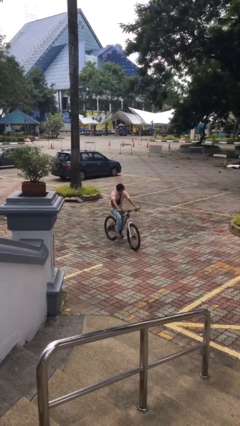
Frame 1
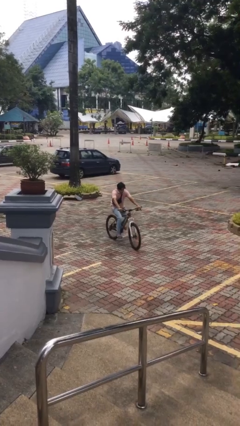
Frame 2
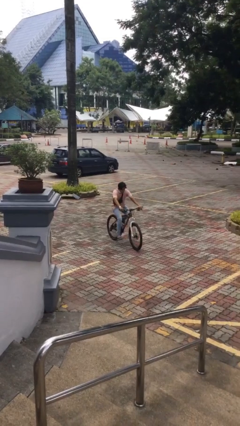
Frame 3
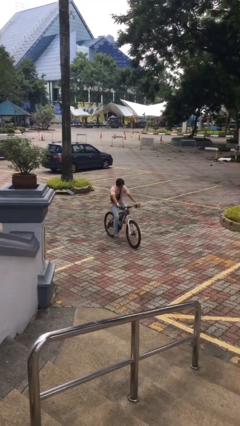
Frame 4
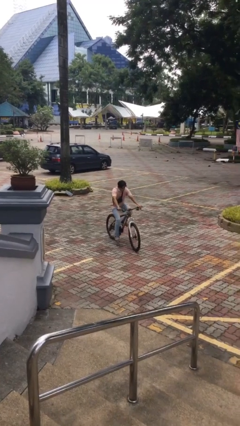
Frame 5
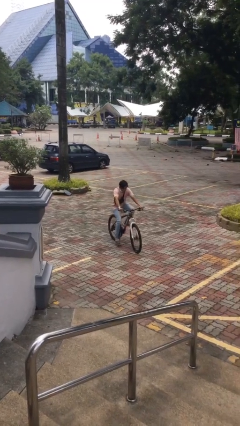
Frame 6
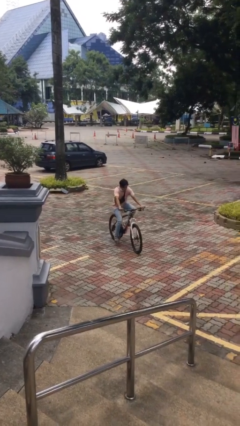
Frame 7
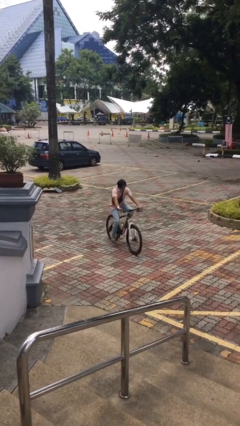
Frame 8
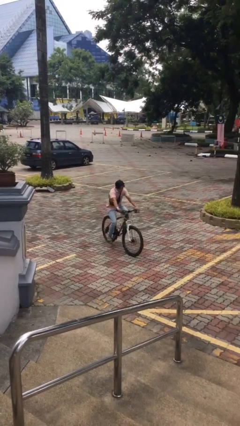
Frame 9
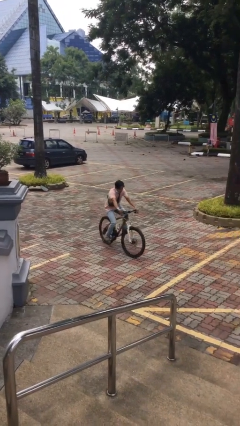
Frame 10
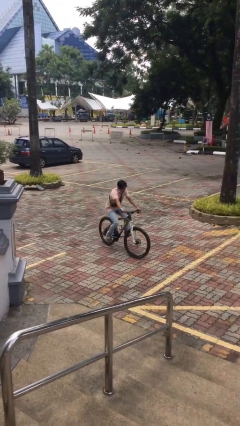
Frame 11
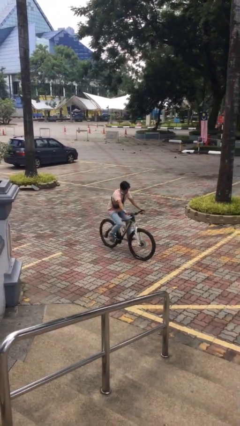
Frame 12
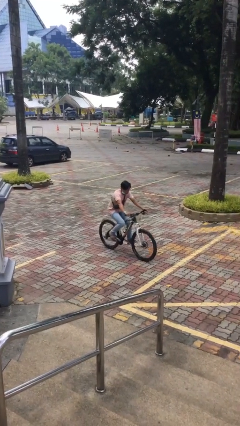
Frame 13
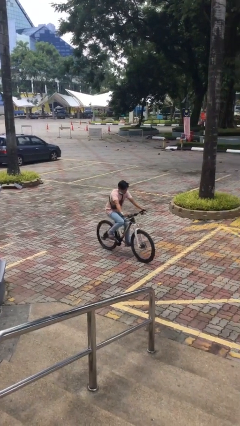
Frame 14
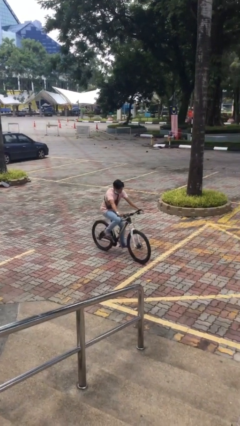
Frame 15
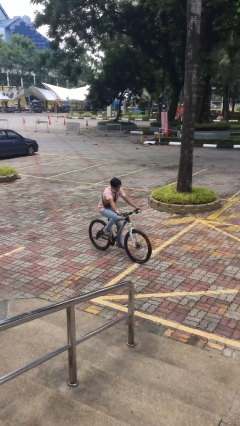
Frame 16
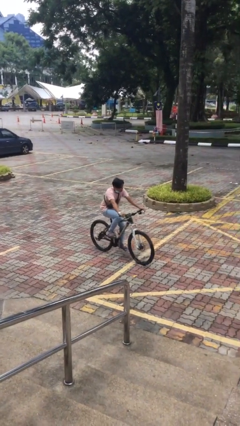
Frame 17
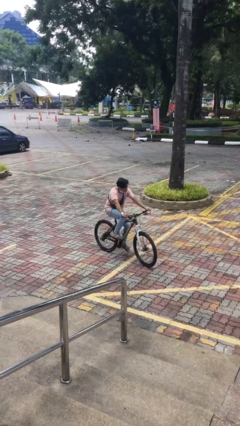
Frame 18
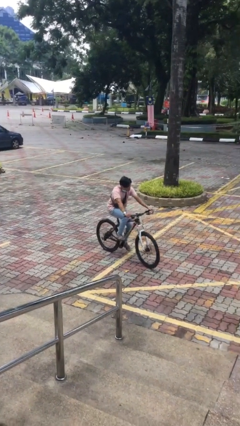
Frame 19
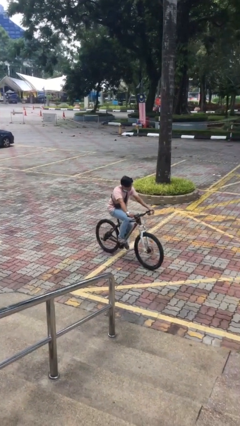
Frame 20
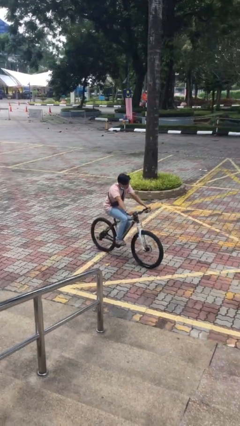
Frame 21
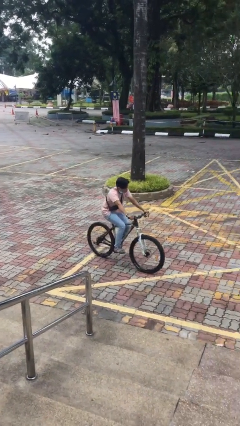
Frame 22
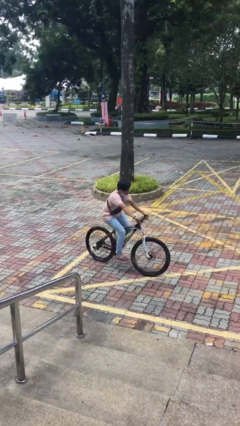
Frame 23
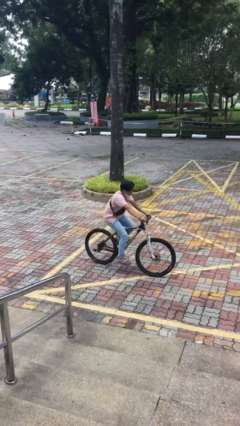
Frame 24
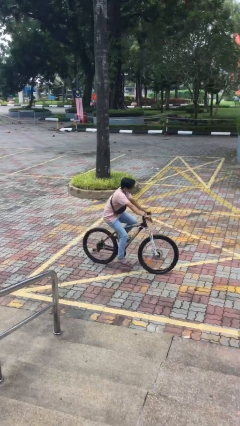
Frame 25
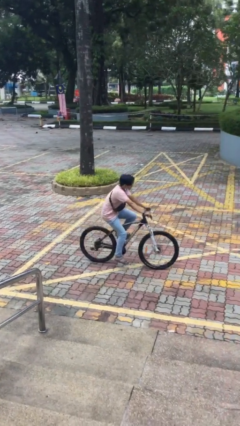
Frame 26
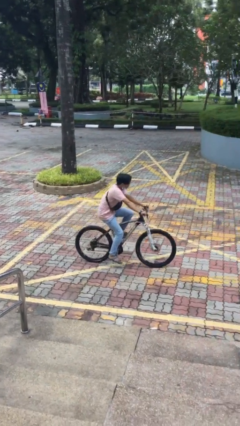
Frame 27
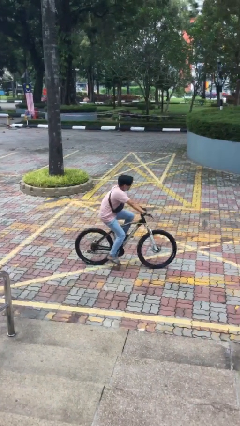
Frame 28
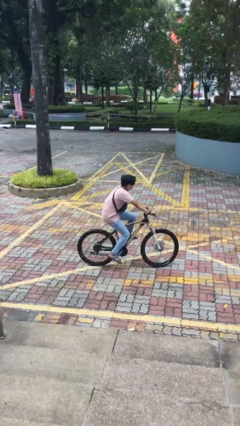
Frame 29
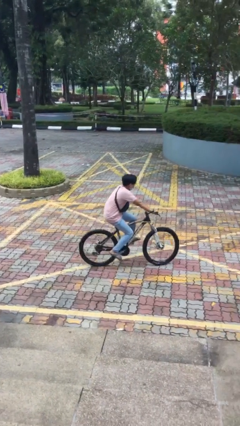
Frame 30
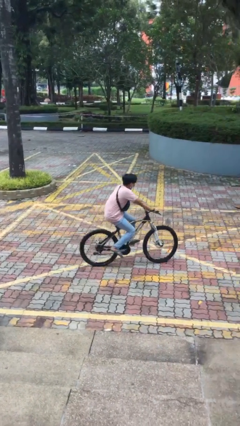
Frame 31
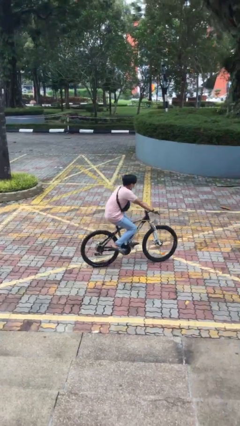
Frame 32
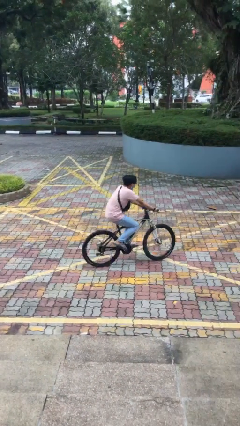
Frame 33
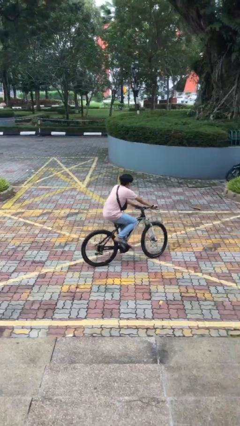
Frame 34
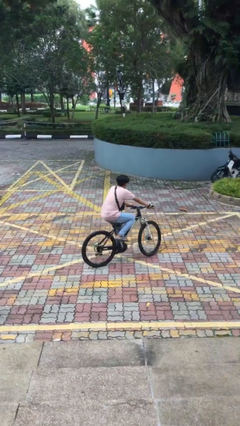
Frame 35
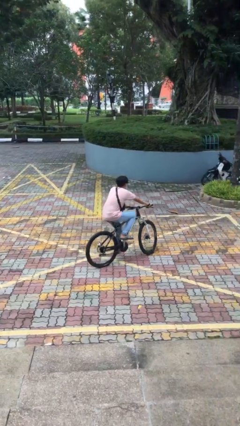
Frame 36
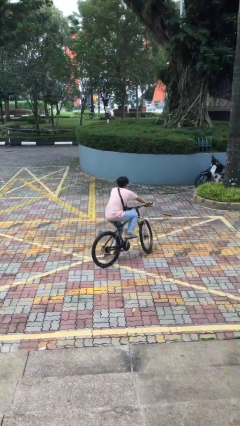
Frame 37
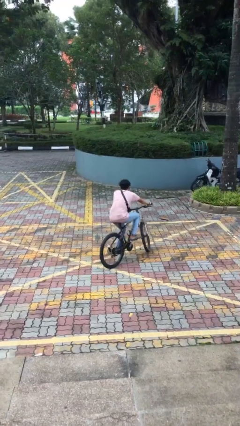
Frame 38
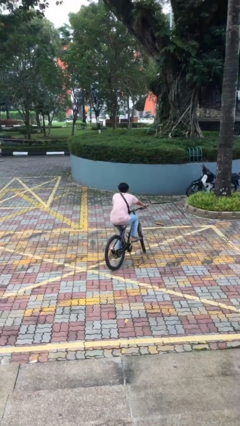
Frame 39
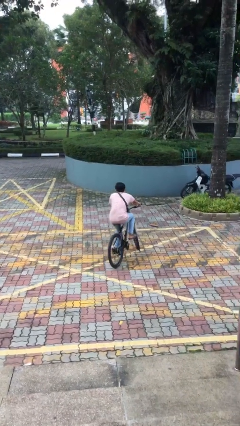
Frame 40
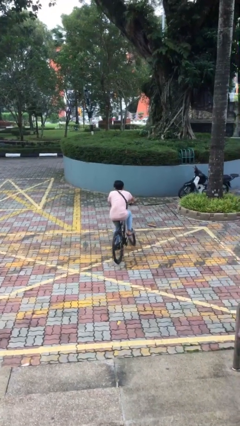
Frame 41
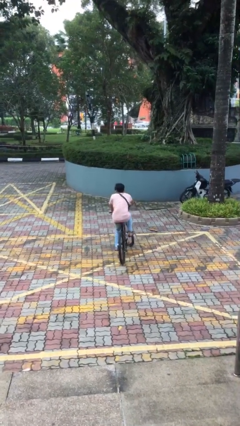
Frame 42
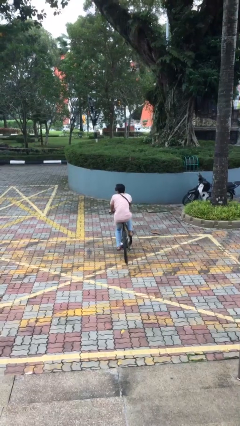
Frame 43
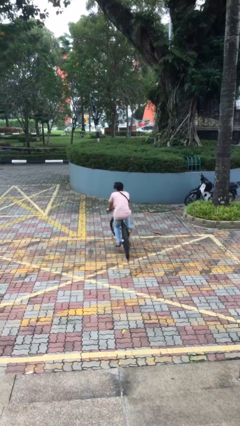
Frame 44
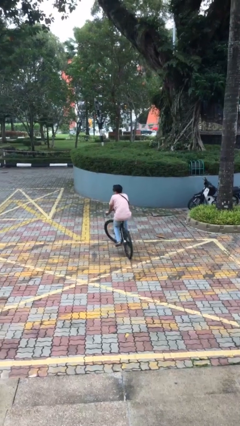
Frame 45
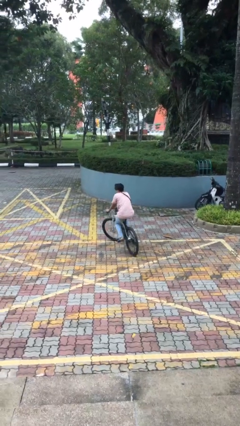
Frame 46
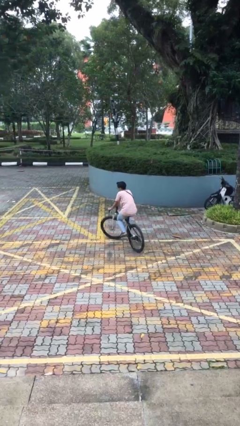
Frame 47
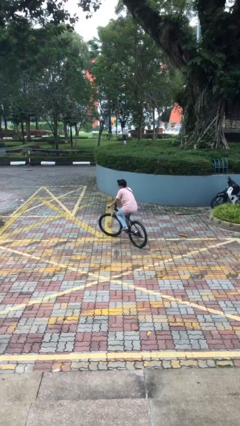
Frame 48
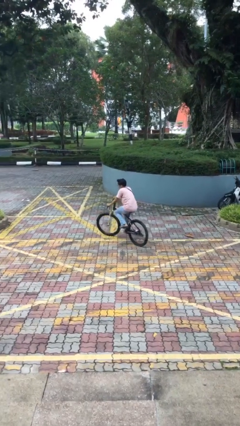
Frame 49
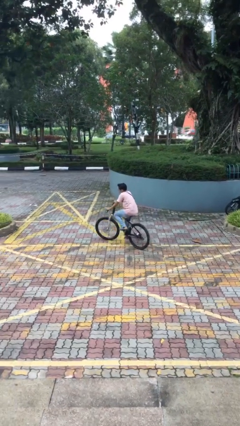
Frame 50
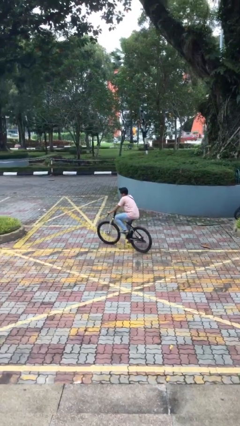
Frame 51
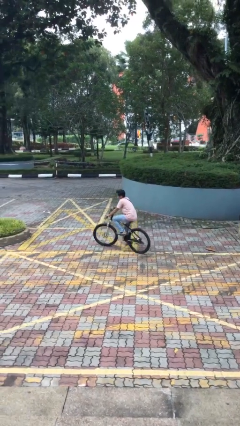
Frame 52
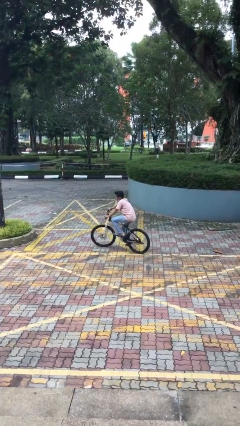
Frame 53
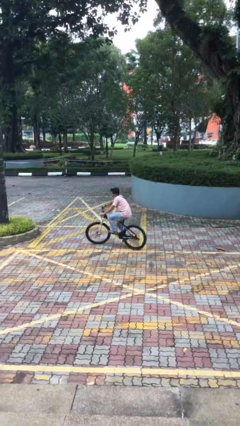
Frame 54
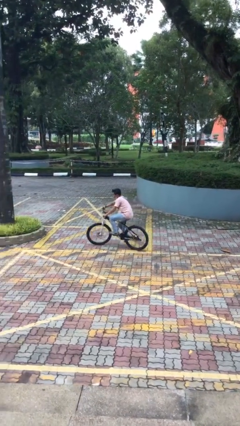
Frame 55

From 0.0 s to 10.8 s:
person rides bicycle

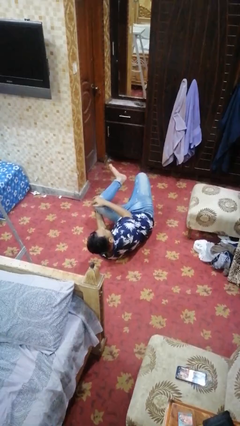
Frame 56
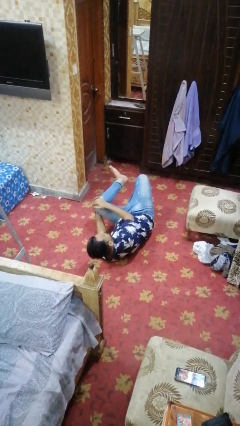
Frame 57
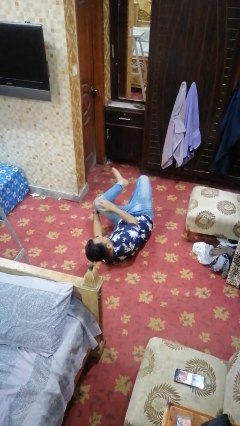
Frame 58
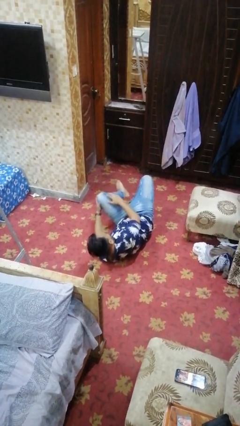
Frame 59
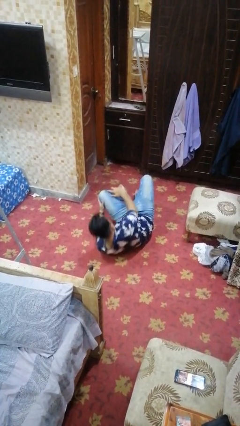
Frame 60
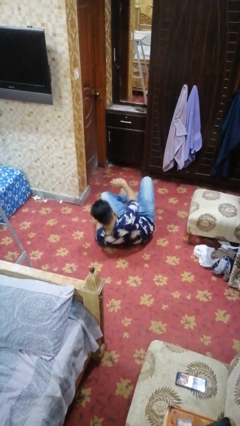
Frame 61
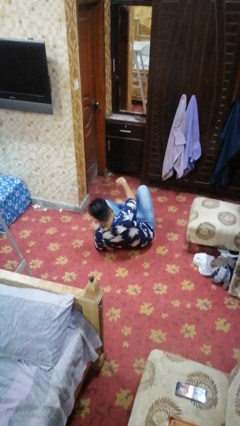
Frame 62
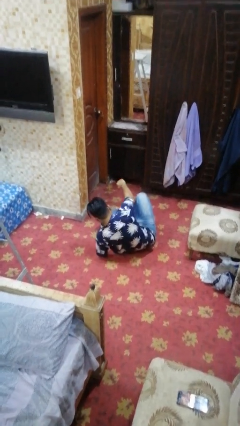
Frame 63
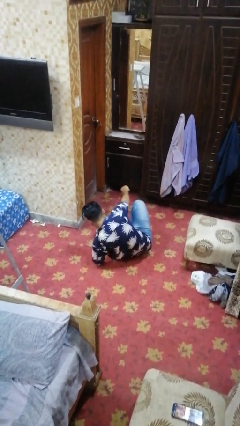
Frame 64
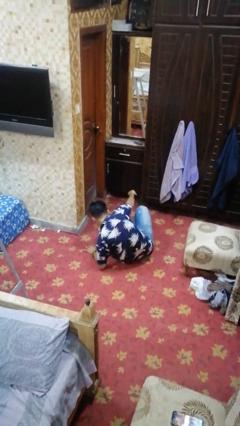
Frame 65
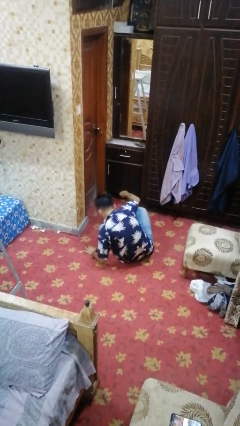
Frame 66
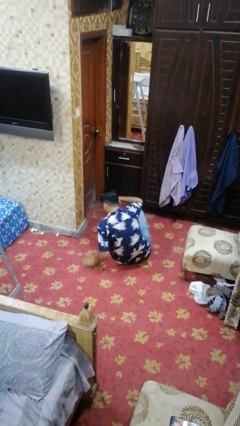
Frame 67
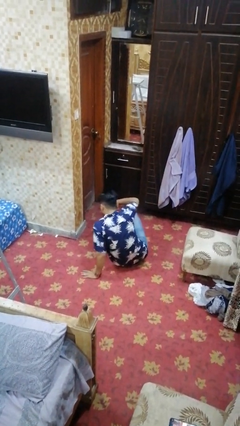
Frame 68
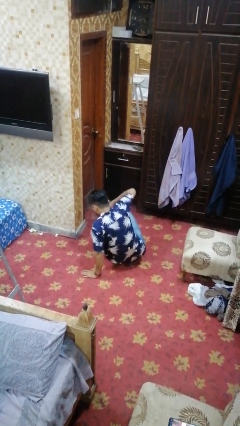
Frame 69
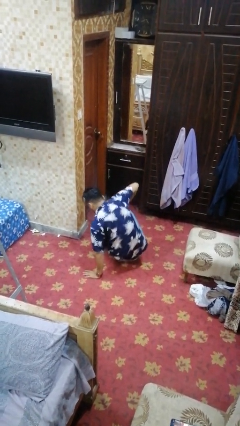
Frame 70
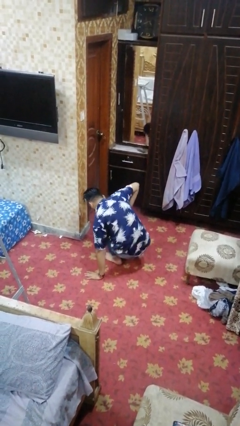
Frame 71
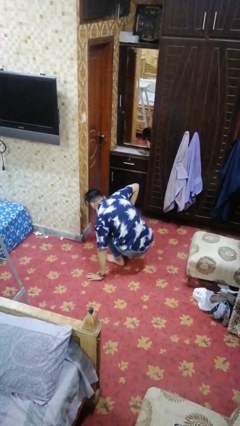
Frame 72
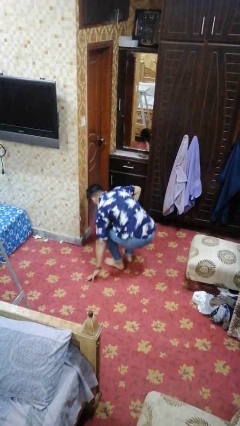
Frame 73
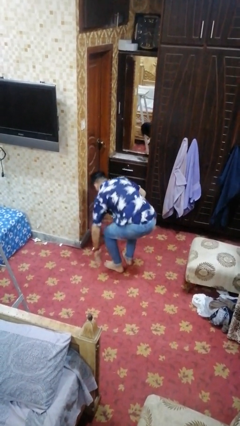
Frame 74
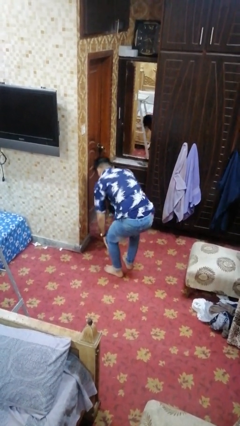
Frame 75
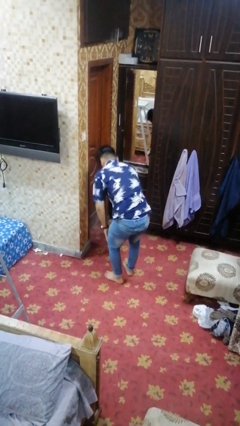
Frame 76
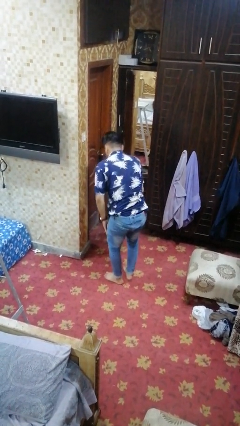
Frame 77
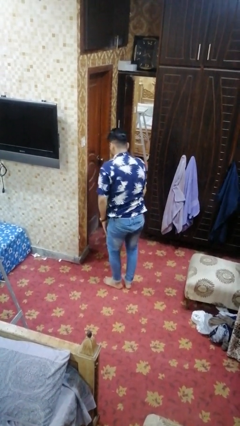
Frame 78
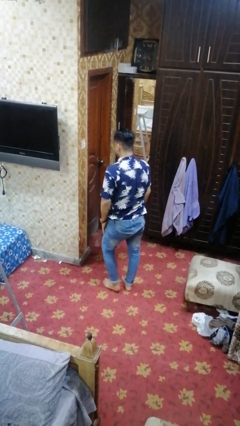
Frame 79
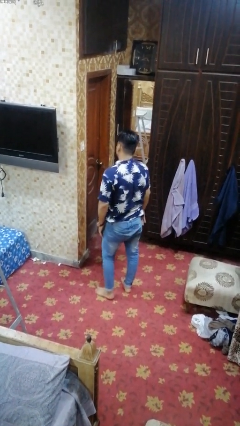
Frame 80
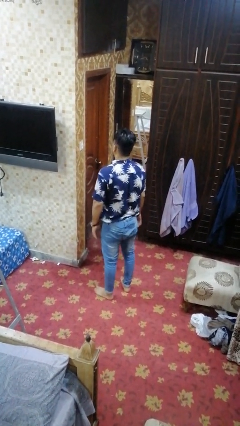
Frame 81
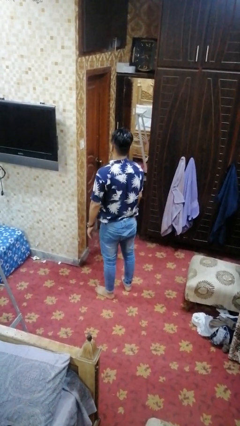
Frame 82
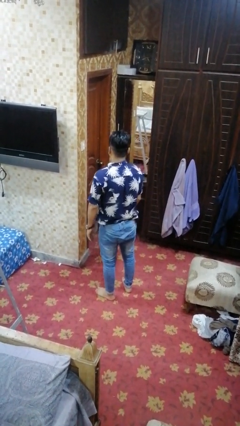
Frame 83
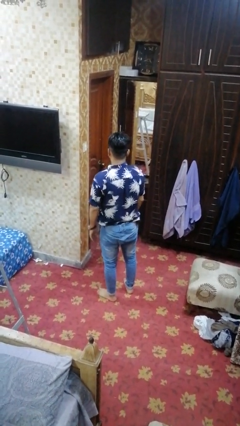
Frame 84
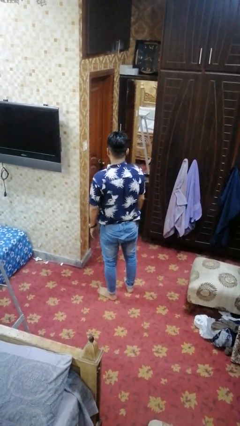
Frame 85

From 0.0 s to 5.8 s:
person stands up from floor

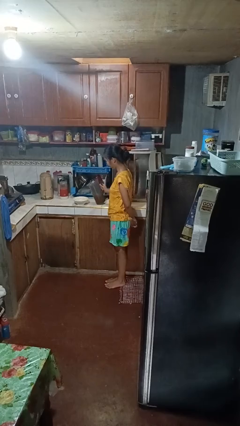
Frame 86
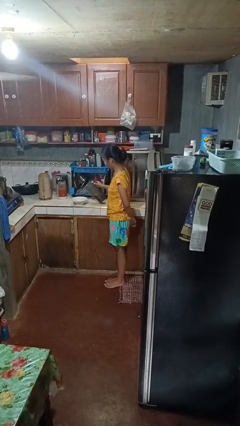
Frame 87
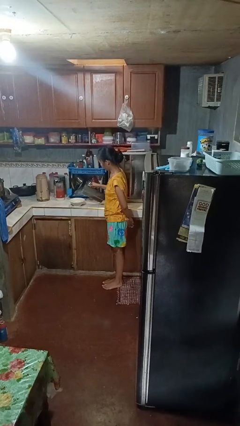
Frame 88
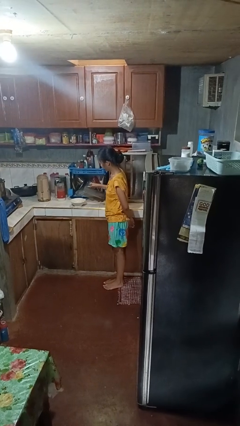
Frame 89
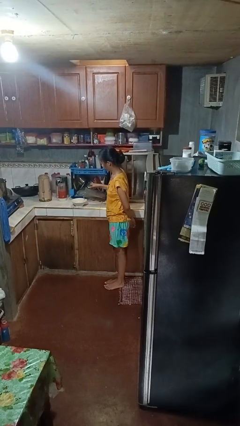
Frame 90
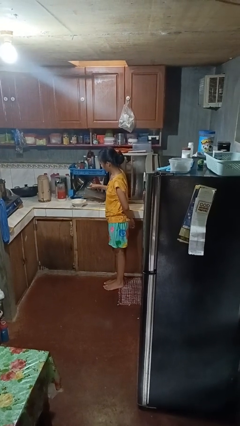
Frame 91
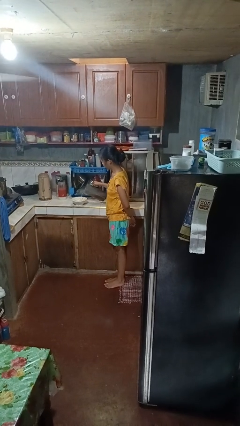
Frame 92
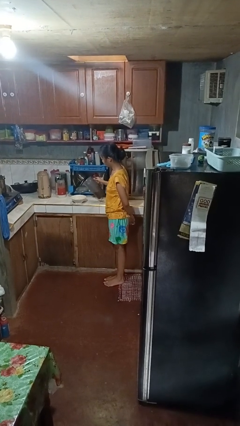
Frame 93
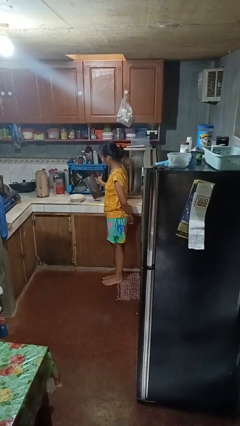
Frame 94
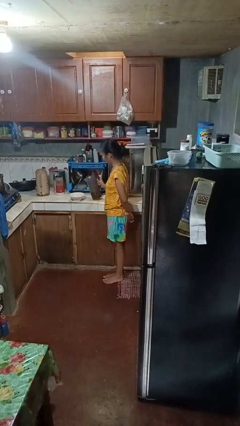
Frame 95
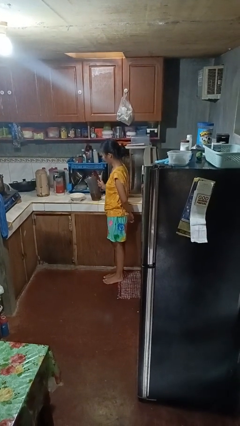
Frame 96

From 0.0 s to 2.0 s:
person pours into bowl
